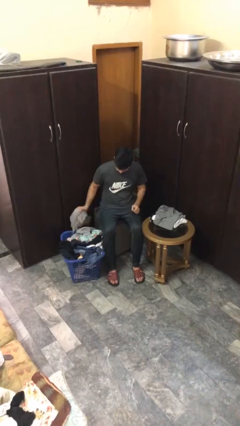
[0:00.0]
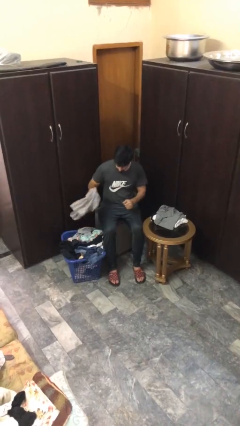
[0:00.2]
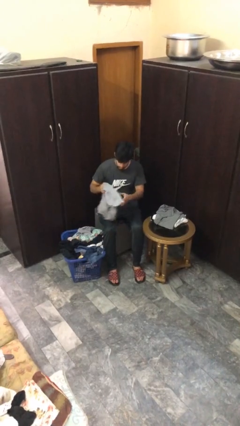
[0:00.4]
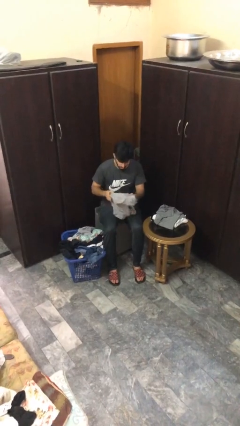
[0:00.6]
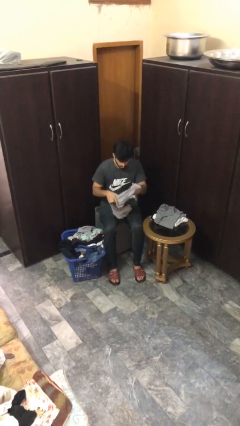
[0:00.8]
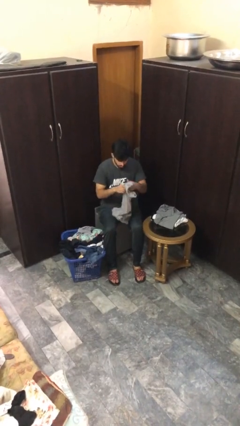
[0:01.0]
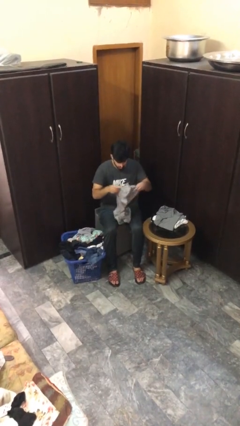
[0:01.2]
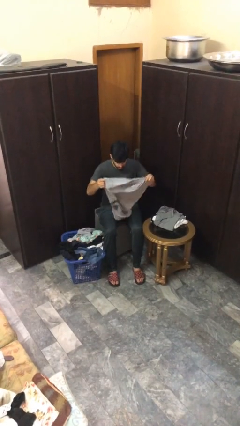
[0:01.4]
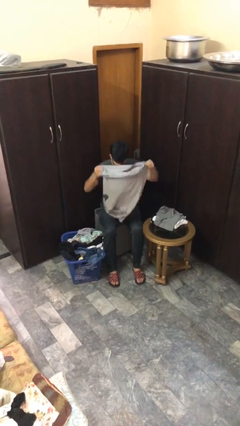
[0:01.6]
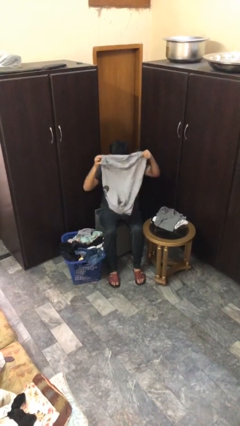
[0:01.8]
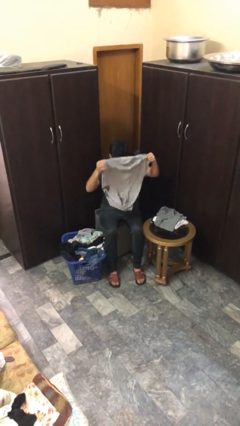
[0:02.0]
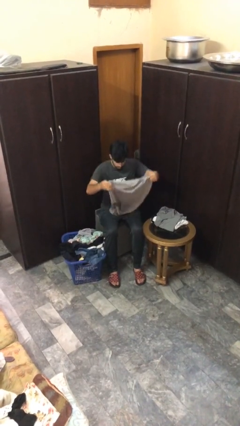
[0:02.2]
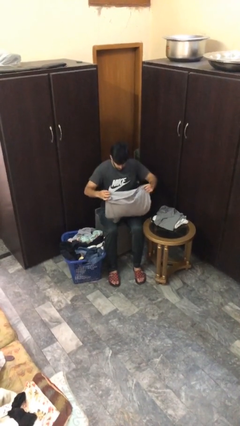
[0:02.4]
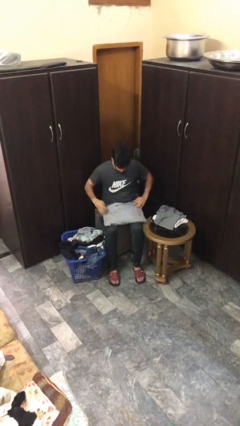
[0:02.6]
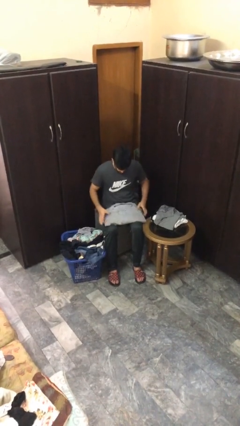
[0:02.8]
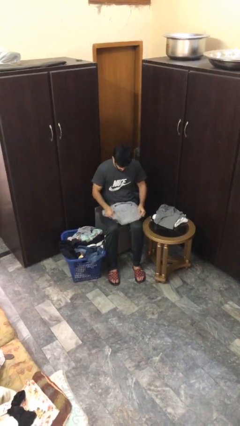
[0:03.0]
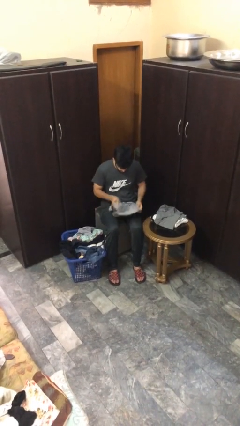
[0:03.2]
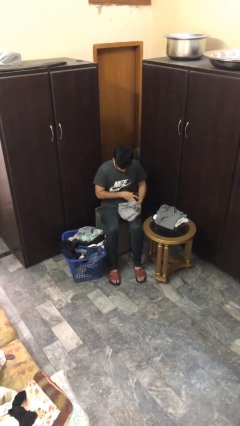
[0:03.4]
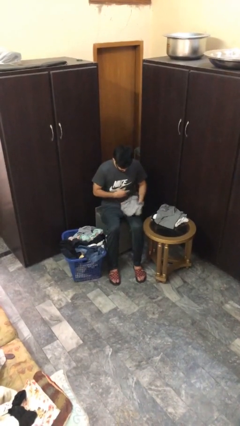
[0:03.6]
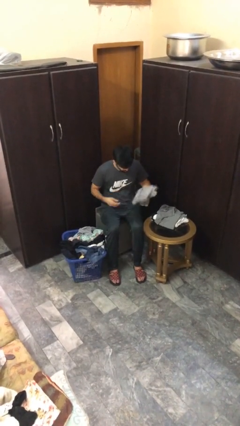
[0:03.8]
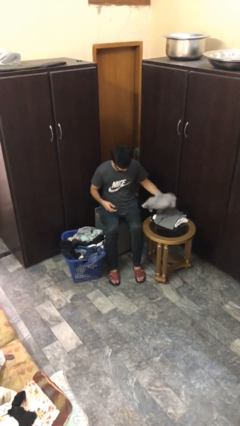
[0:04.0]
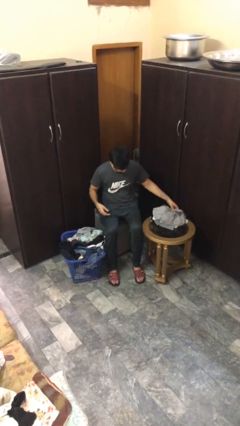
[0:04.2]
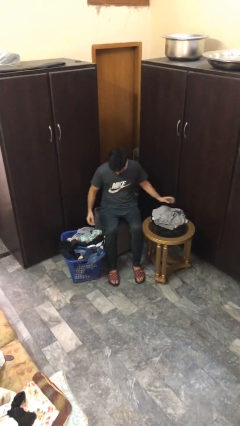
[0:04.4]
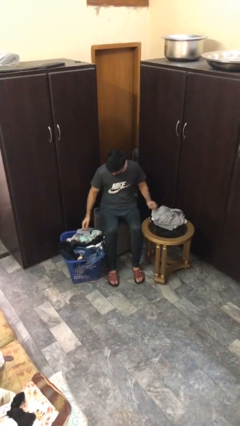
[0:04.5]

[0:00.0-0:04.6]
person folds shirt

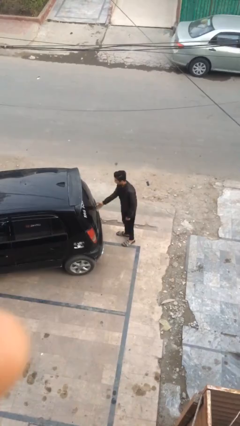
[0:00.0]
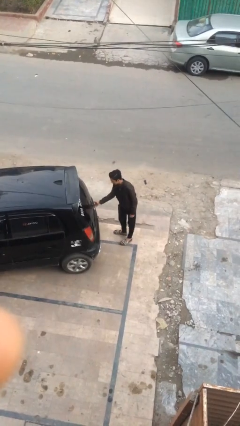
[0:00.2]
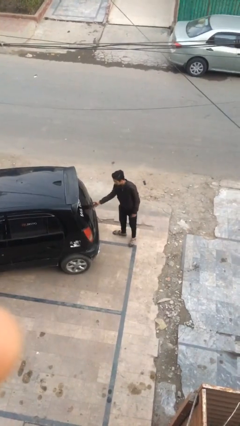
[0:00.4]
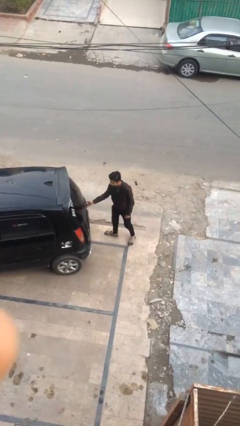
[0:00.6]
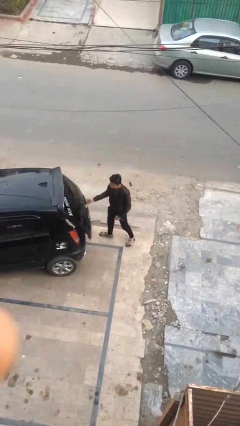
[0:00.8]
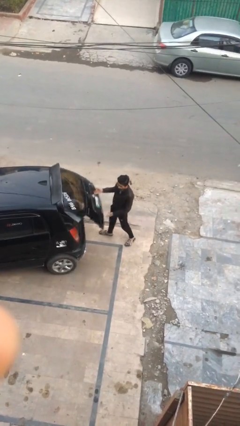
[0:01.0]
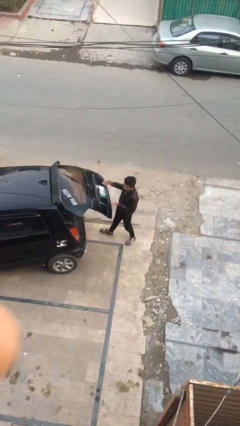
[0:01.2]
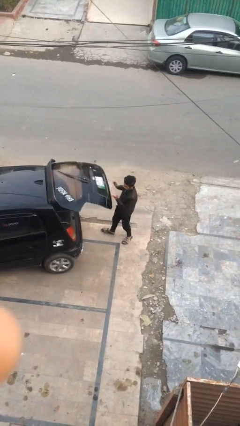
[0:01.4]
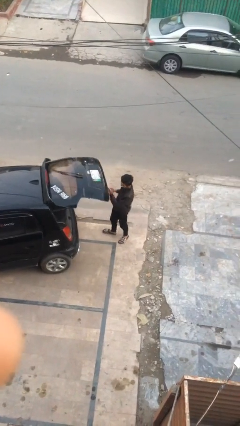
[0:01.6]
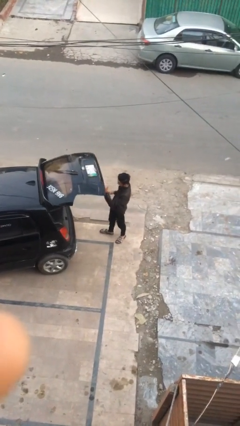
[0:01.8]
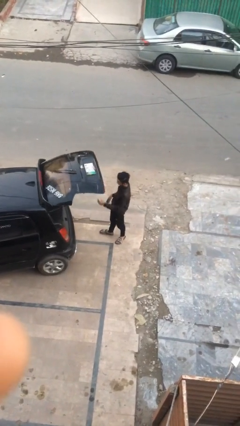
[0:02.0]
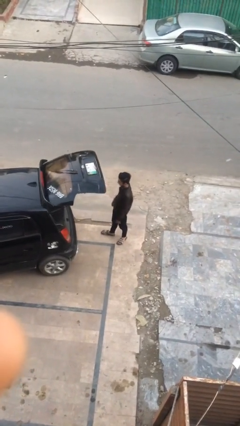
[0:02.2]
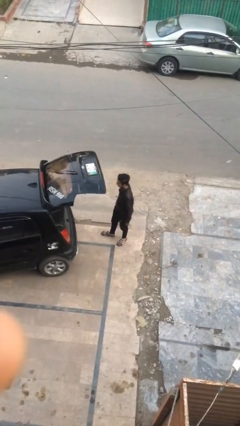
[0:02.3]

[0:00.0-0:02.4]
person opens car trunk

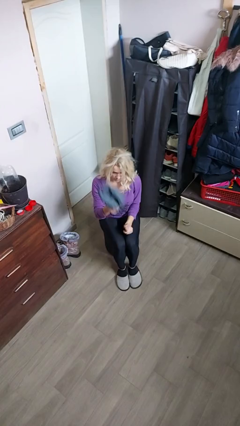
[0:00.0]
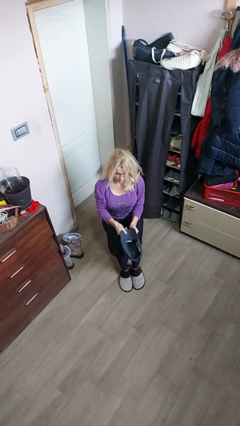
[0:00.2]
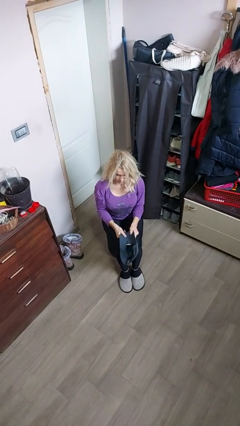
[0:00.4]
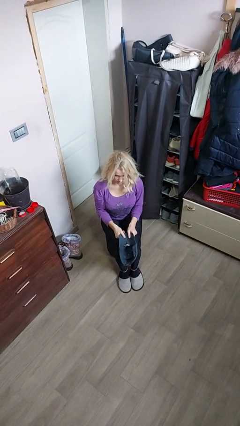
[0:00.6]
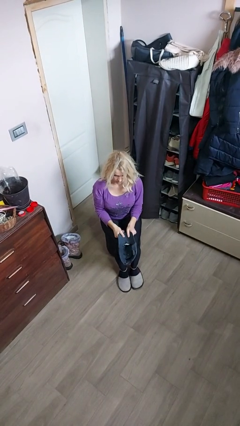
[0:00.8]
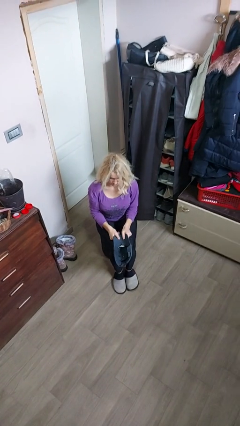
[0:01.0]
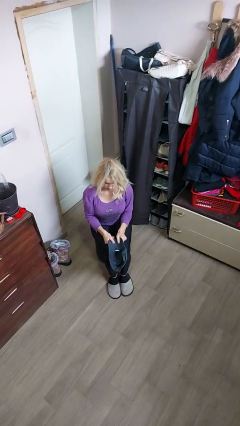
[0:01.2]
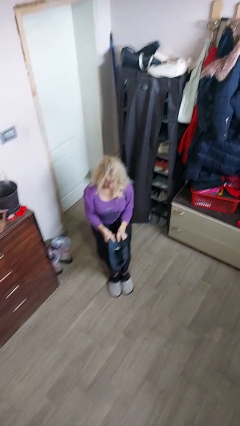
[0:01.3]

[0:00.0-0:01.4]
person takes off hat

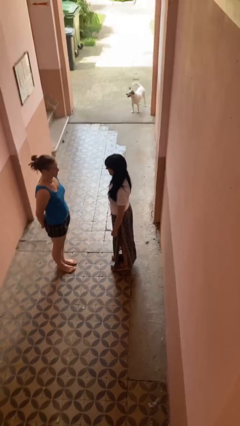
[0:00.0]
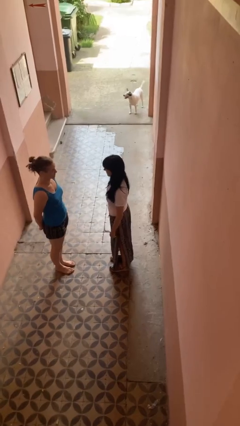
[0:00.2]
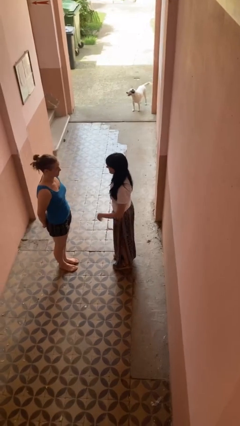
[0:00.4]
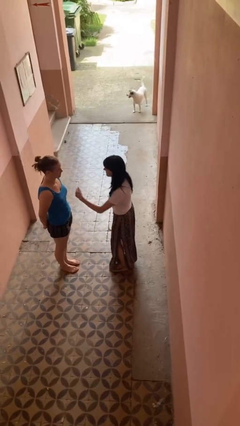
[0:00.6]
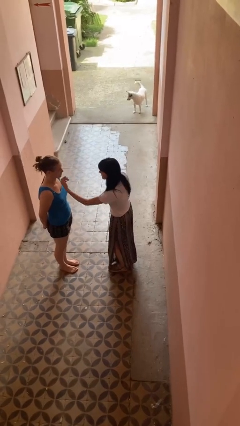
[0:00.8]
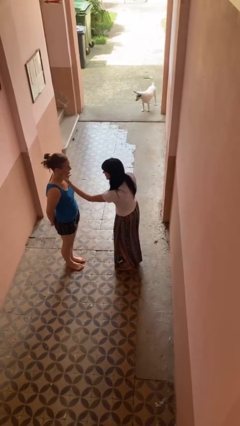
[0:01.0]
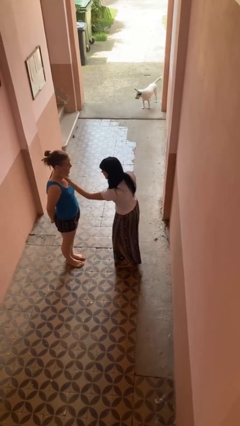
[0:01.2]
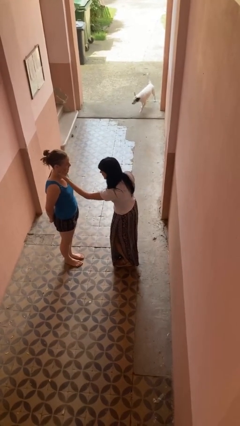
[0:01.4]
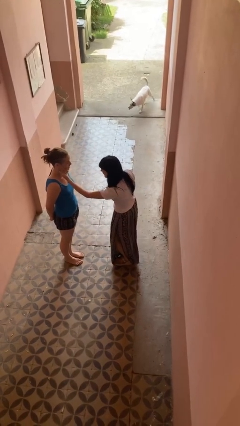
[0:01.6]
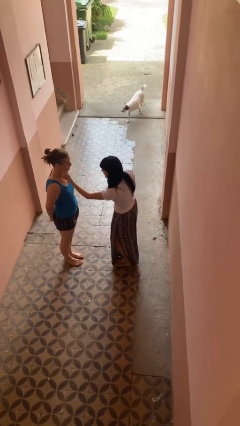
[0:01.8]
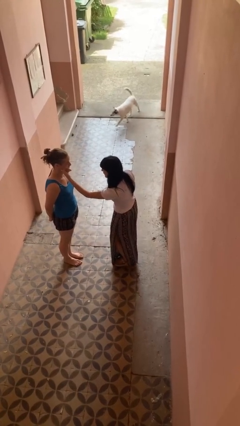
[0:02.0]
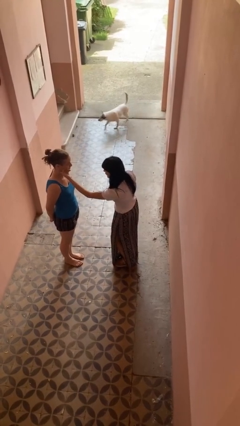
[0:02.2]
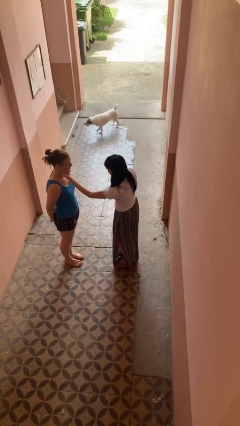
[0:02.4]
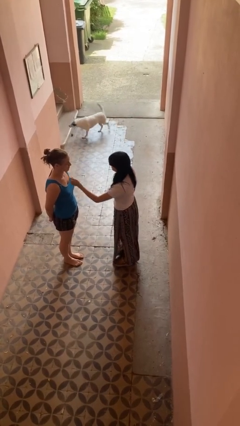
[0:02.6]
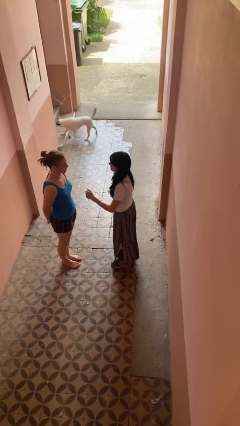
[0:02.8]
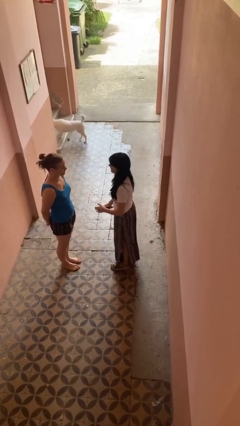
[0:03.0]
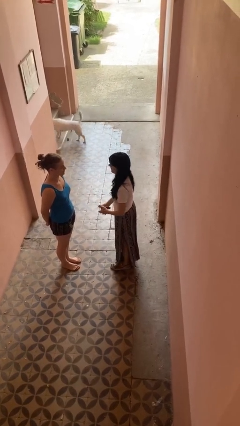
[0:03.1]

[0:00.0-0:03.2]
person touches face of person

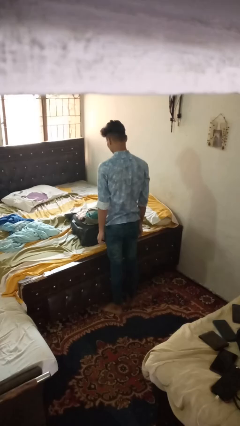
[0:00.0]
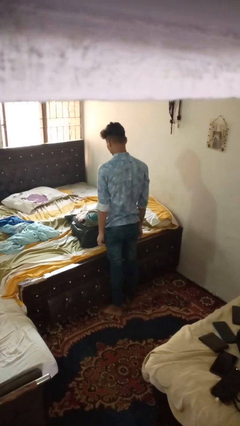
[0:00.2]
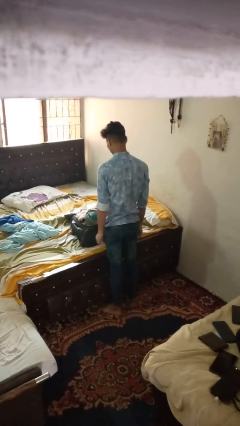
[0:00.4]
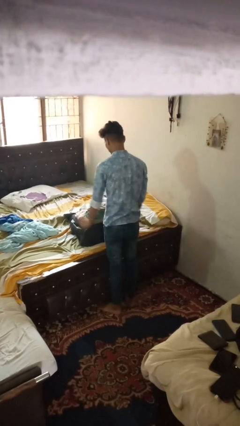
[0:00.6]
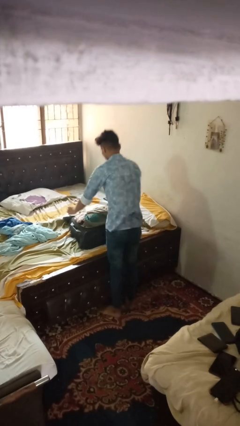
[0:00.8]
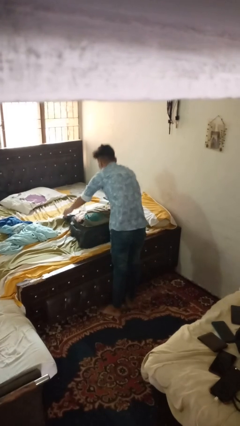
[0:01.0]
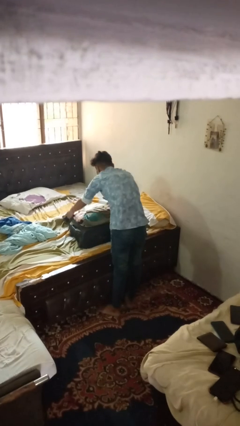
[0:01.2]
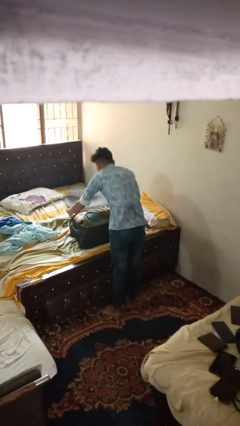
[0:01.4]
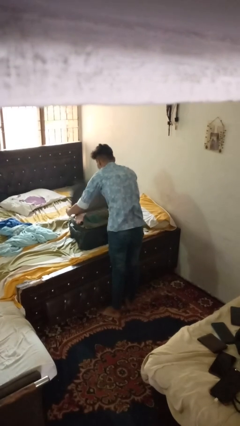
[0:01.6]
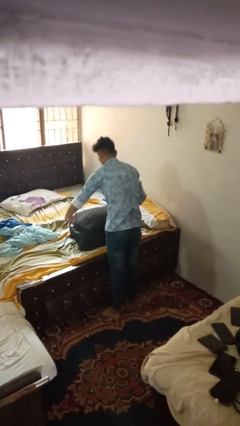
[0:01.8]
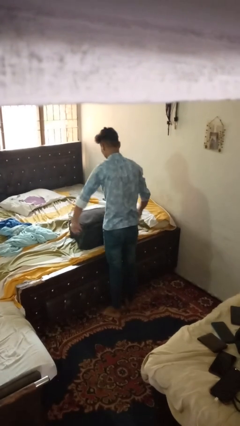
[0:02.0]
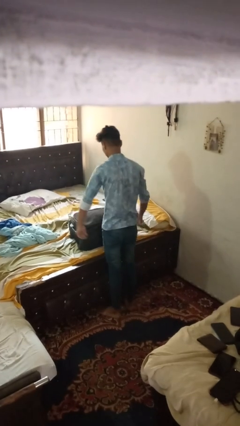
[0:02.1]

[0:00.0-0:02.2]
person closes suitcase

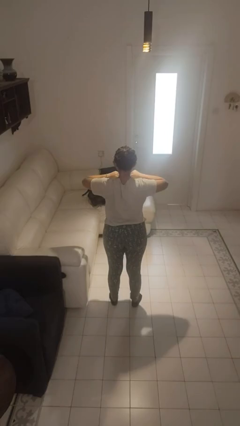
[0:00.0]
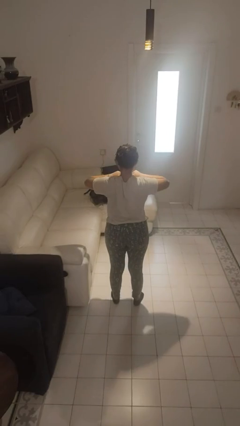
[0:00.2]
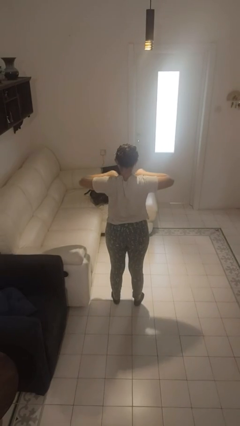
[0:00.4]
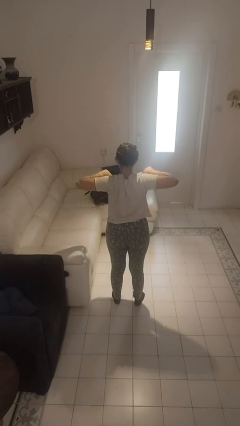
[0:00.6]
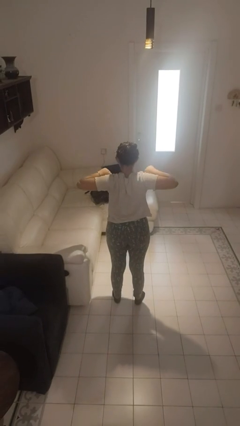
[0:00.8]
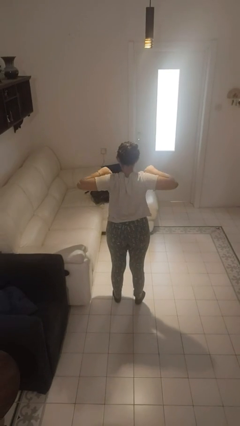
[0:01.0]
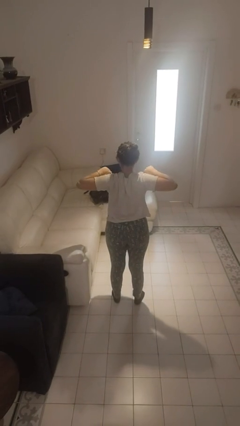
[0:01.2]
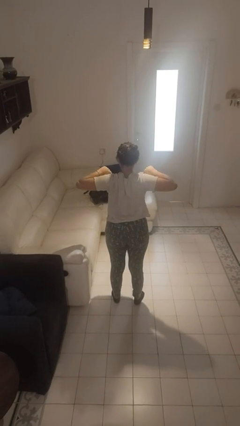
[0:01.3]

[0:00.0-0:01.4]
person stretches back

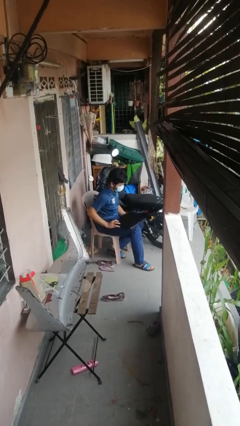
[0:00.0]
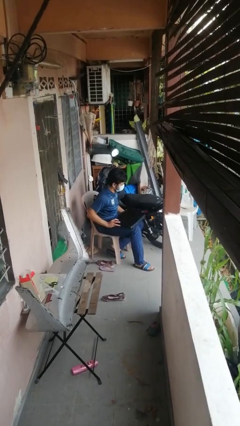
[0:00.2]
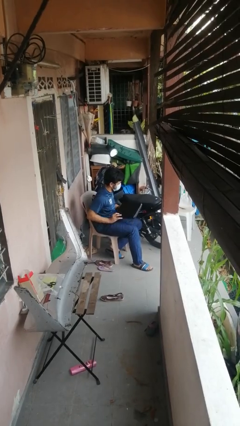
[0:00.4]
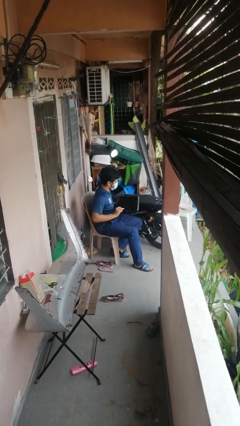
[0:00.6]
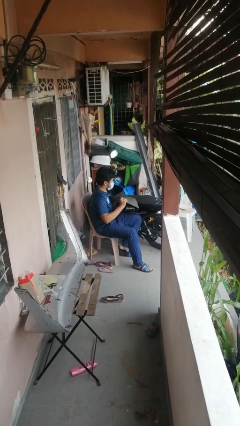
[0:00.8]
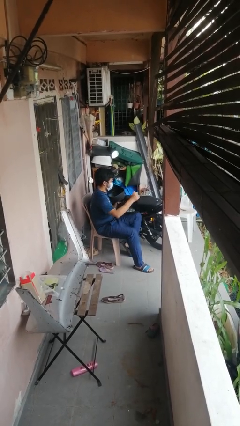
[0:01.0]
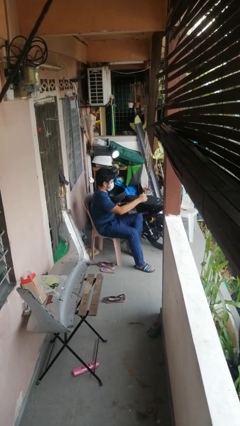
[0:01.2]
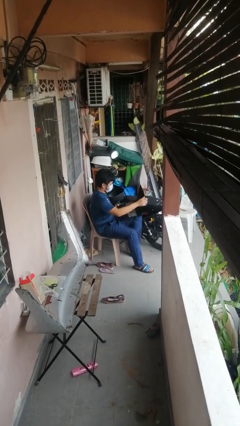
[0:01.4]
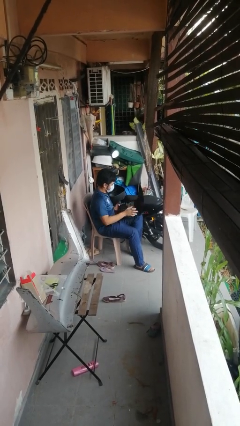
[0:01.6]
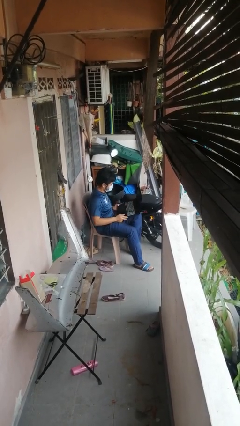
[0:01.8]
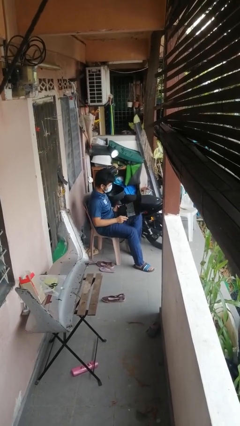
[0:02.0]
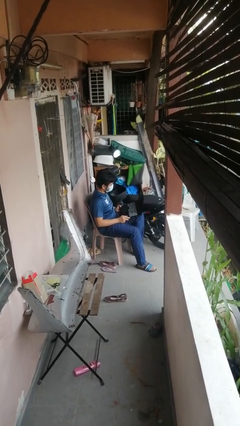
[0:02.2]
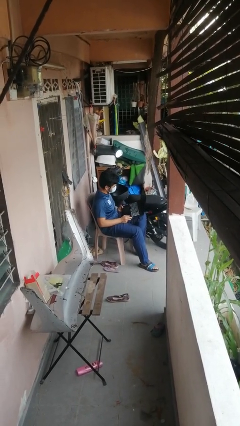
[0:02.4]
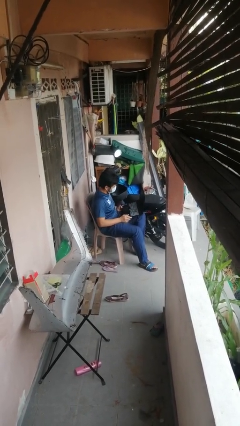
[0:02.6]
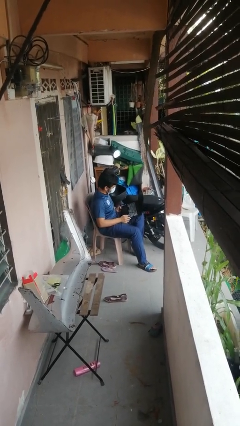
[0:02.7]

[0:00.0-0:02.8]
person opens laptop
